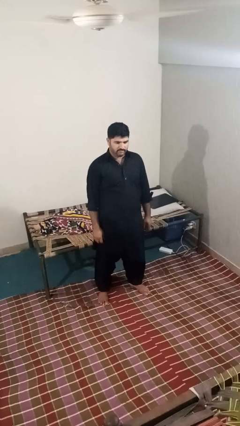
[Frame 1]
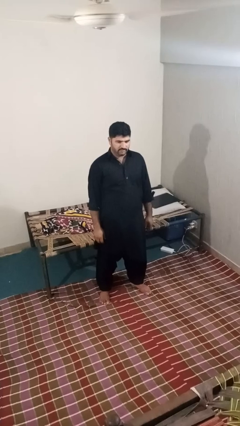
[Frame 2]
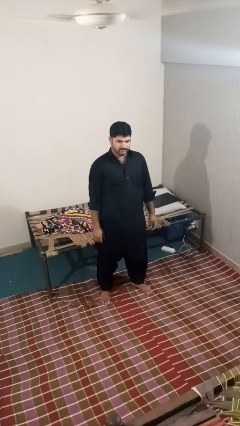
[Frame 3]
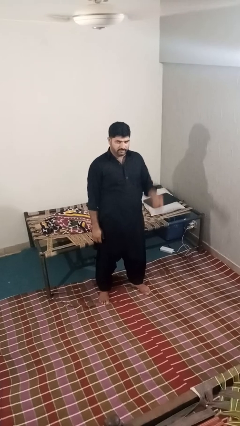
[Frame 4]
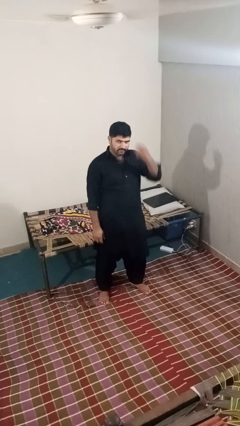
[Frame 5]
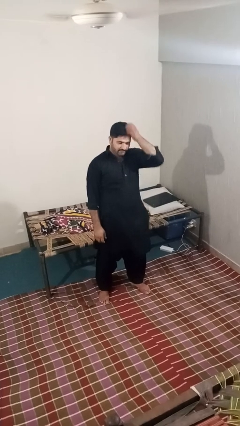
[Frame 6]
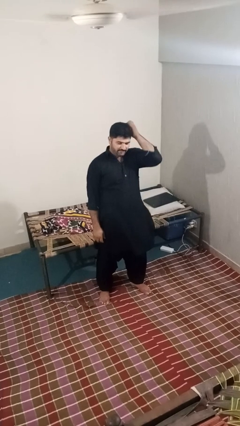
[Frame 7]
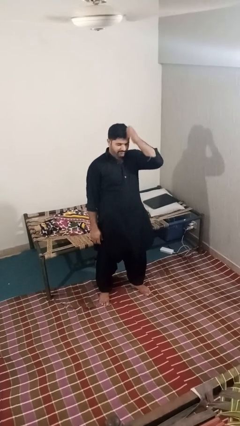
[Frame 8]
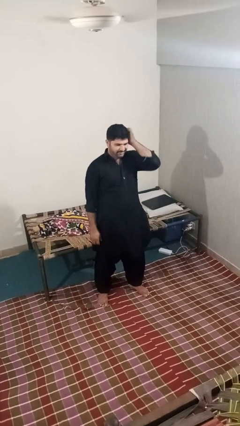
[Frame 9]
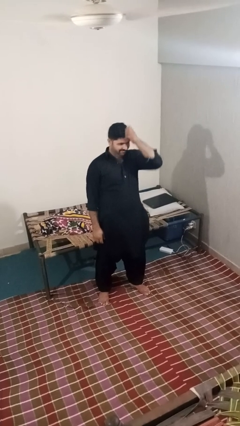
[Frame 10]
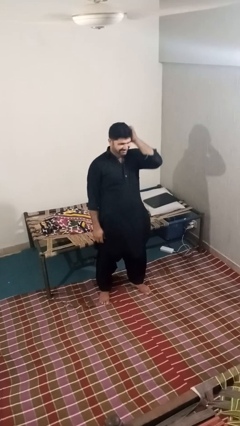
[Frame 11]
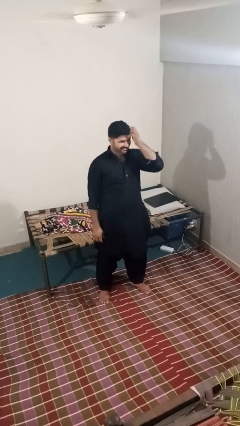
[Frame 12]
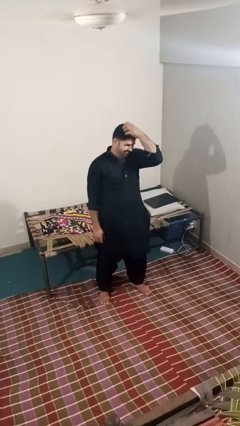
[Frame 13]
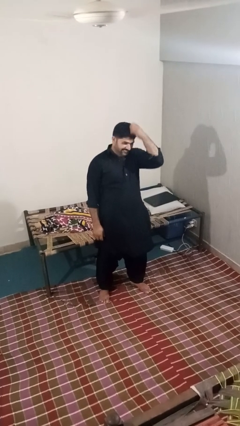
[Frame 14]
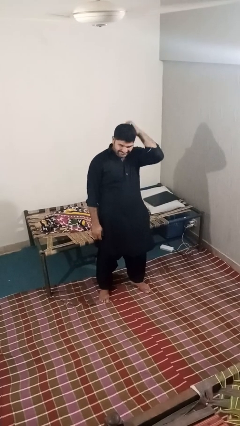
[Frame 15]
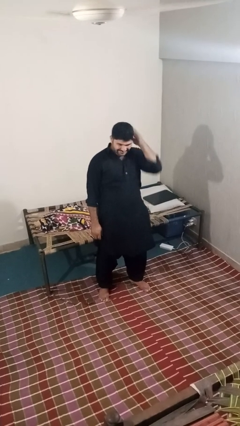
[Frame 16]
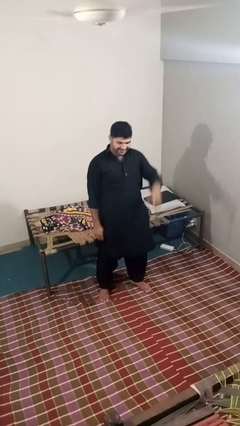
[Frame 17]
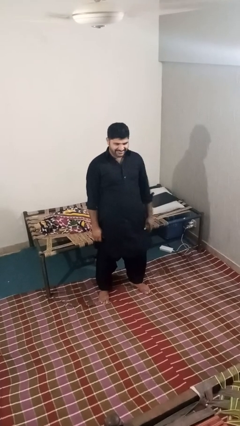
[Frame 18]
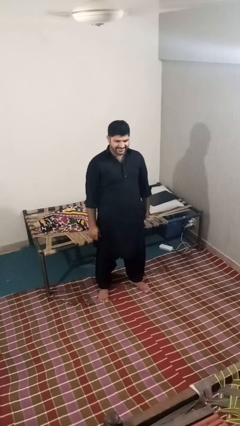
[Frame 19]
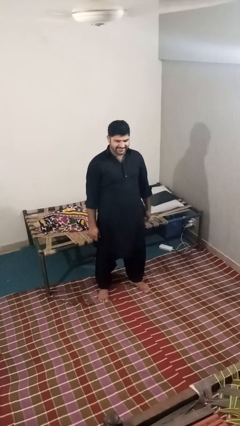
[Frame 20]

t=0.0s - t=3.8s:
person scratches face

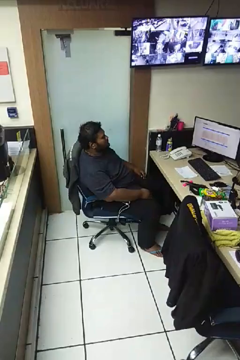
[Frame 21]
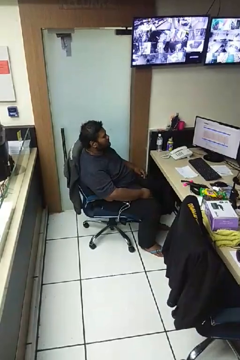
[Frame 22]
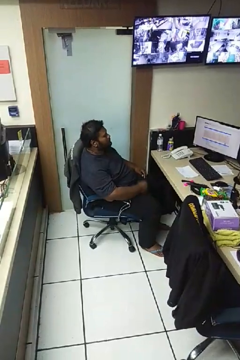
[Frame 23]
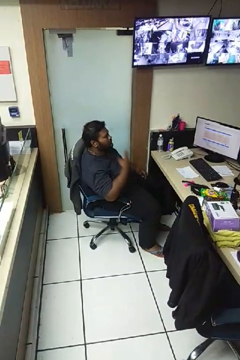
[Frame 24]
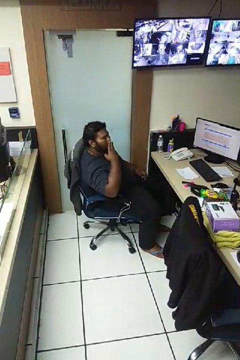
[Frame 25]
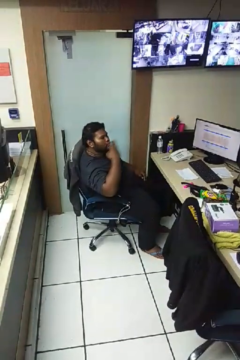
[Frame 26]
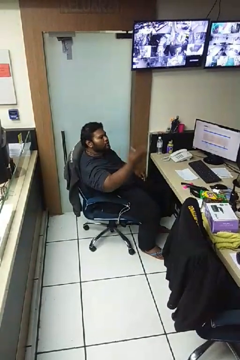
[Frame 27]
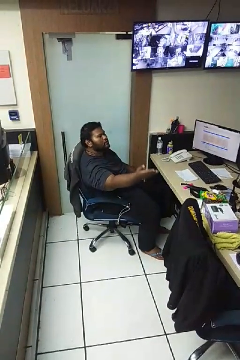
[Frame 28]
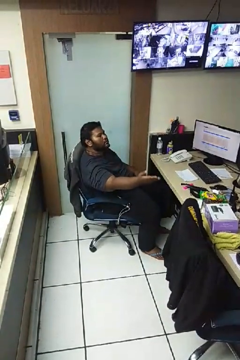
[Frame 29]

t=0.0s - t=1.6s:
person gestures blow kiss

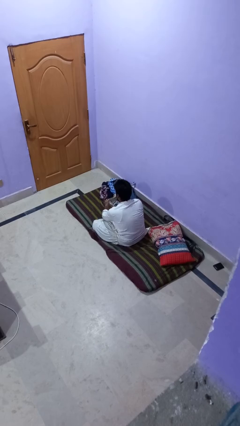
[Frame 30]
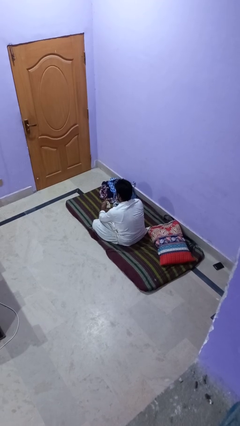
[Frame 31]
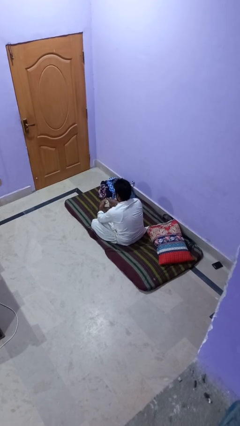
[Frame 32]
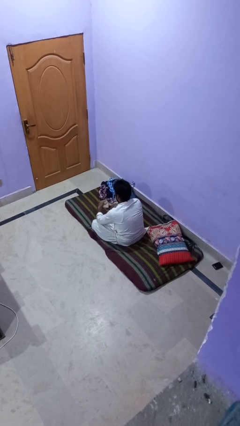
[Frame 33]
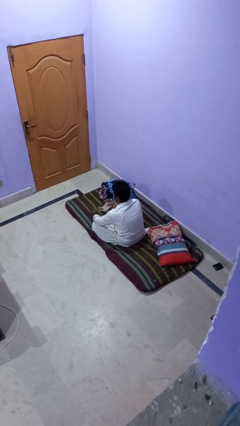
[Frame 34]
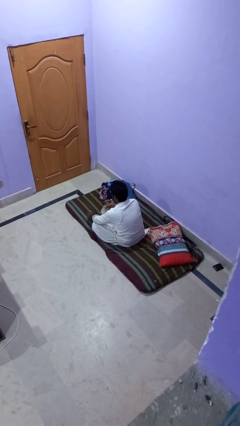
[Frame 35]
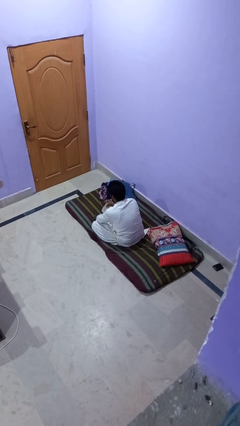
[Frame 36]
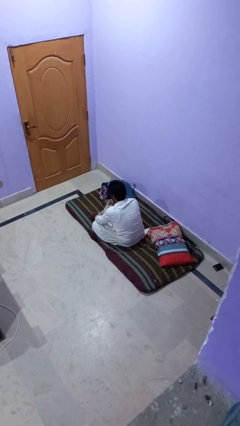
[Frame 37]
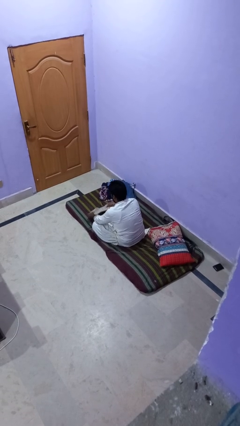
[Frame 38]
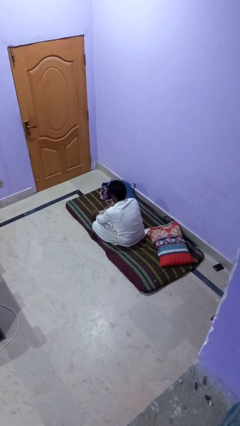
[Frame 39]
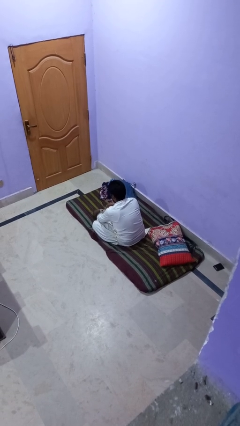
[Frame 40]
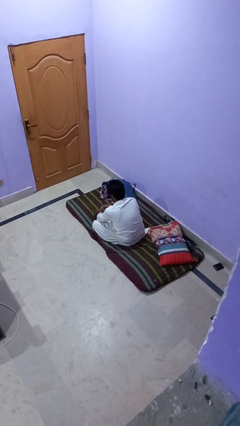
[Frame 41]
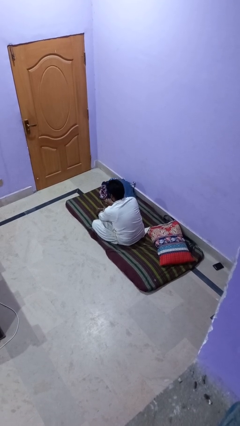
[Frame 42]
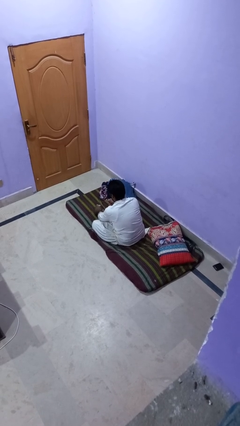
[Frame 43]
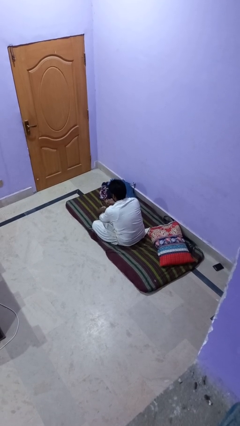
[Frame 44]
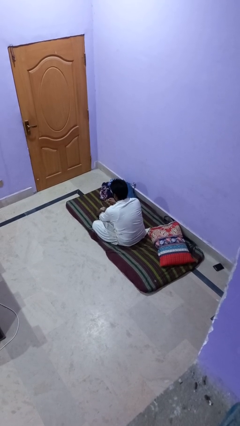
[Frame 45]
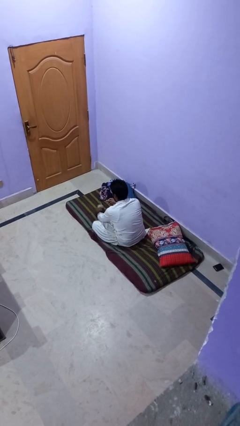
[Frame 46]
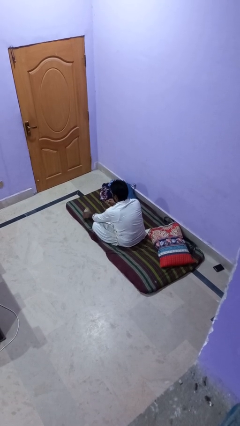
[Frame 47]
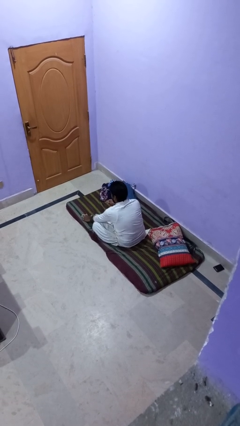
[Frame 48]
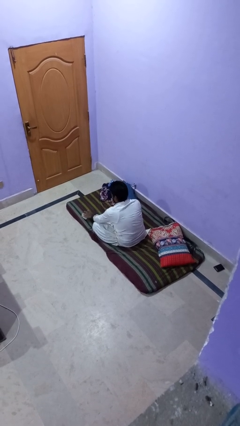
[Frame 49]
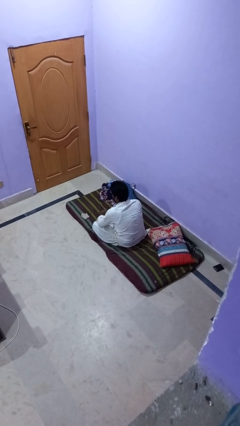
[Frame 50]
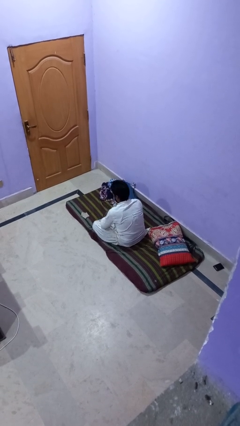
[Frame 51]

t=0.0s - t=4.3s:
person folds socks

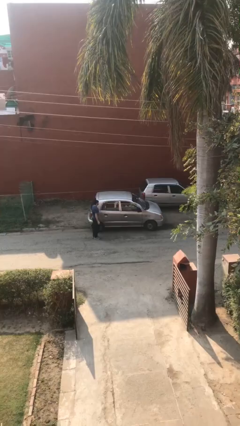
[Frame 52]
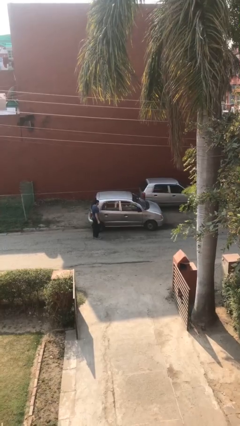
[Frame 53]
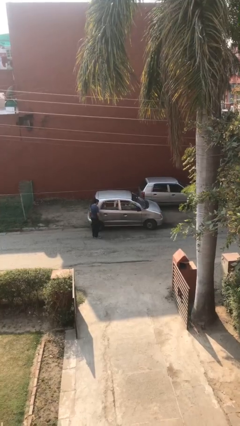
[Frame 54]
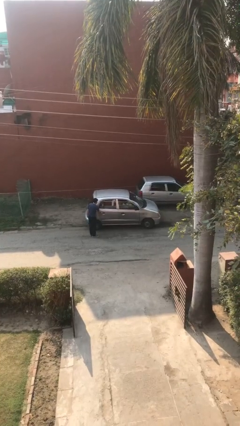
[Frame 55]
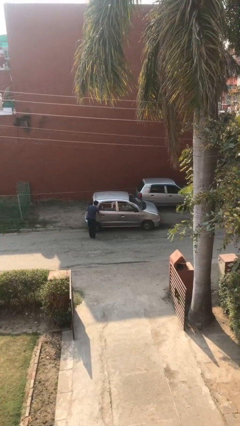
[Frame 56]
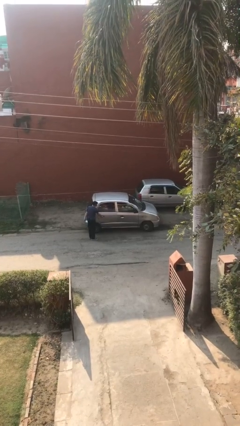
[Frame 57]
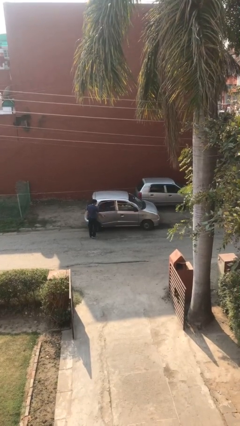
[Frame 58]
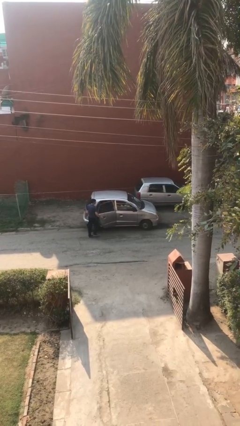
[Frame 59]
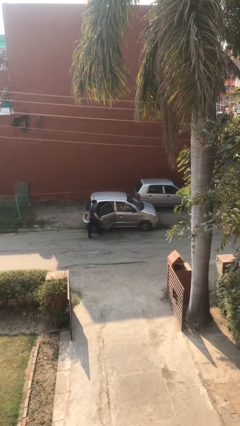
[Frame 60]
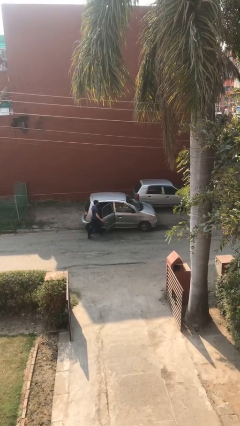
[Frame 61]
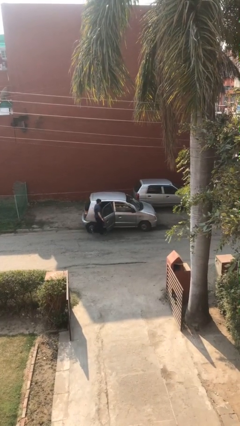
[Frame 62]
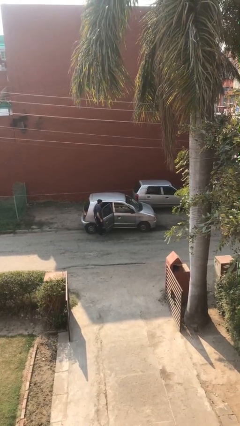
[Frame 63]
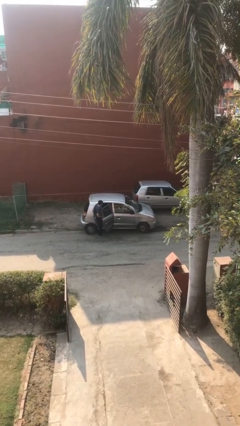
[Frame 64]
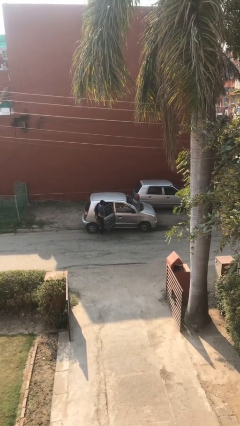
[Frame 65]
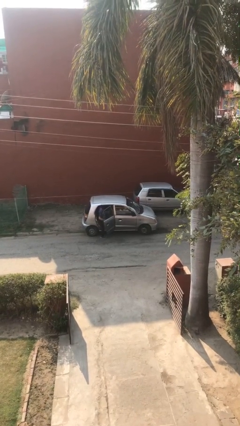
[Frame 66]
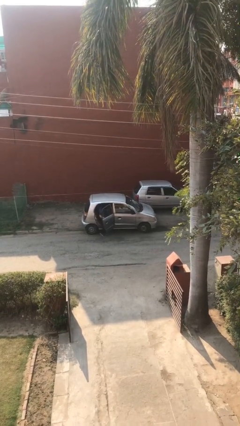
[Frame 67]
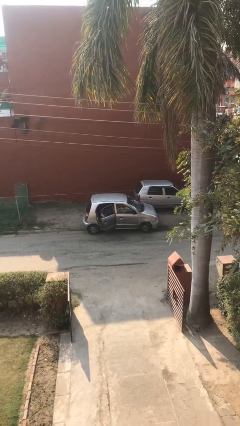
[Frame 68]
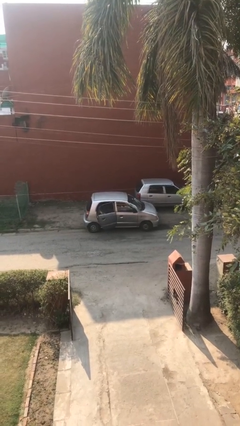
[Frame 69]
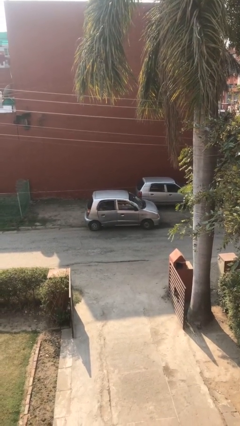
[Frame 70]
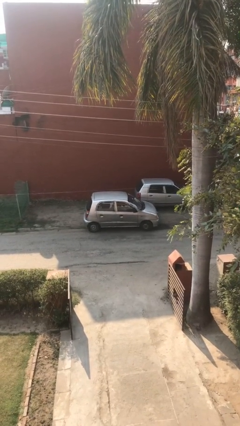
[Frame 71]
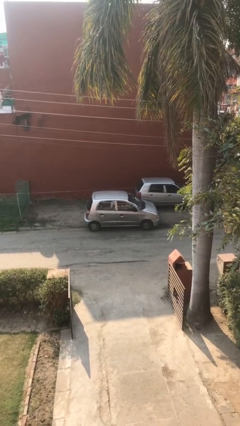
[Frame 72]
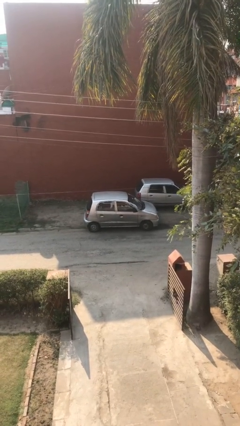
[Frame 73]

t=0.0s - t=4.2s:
car picks up person

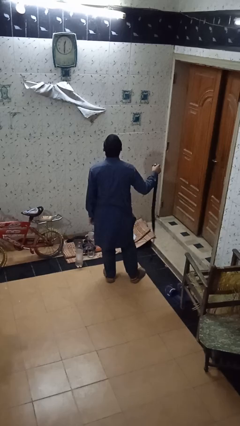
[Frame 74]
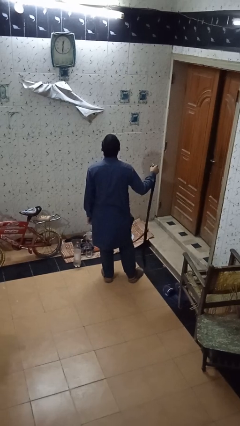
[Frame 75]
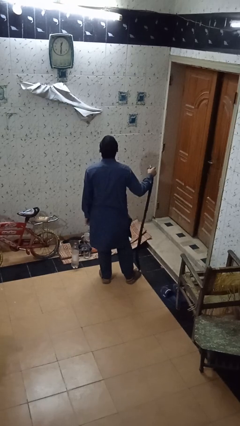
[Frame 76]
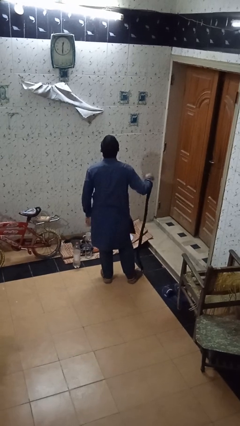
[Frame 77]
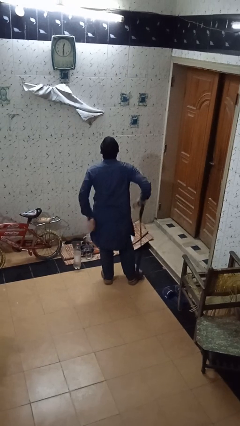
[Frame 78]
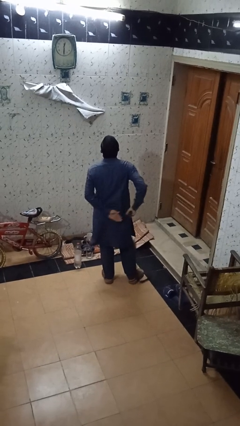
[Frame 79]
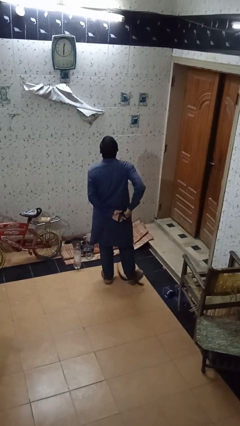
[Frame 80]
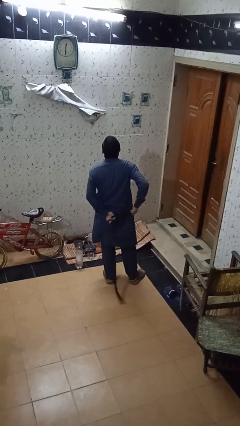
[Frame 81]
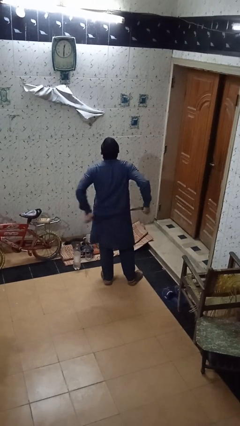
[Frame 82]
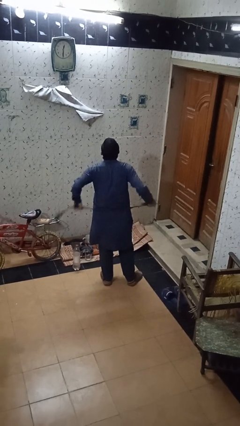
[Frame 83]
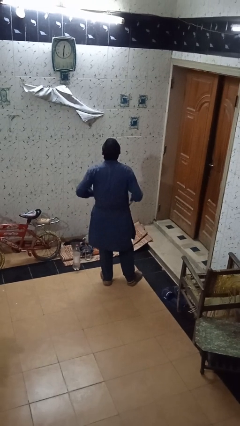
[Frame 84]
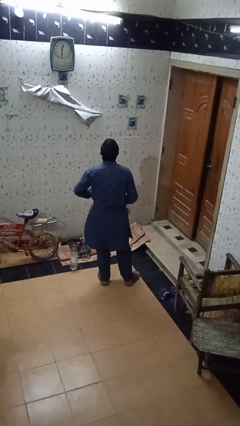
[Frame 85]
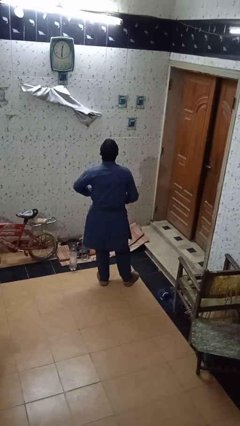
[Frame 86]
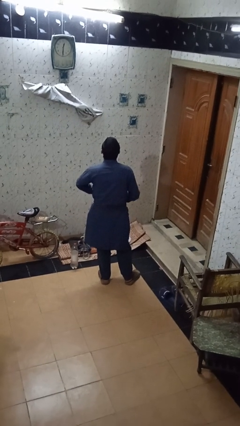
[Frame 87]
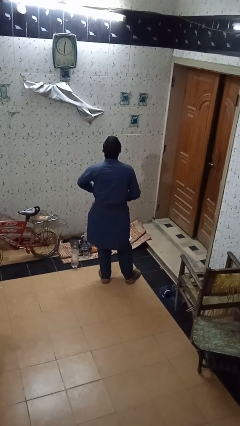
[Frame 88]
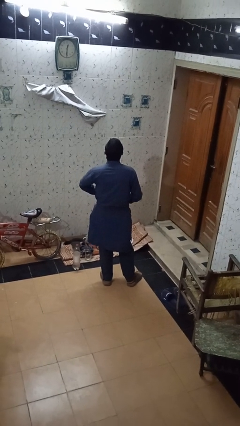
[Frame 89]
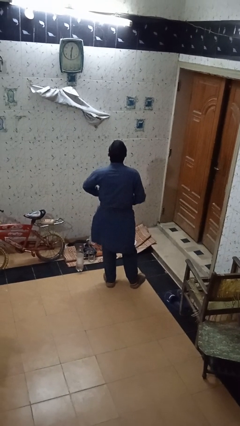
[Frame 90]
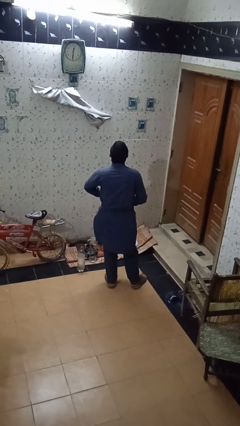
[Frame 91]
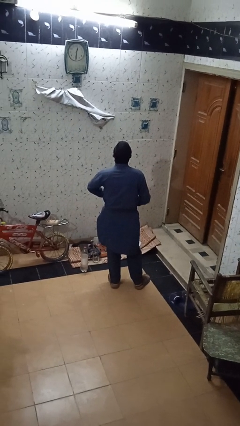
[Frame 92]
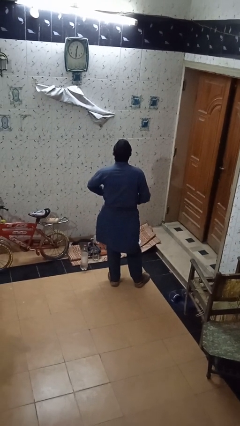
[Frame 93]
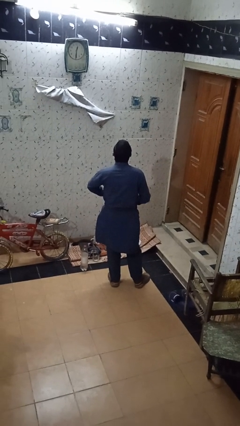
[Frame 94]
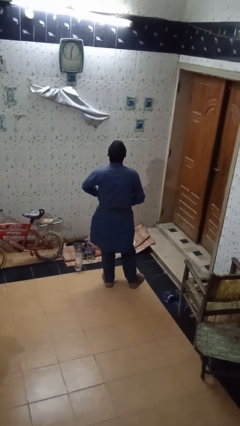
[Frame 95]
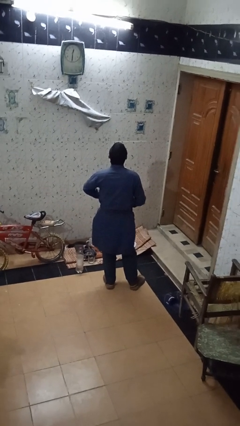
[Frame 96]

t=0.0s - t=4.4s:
person puts on belt

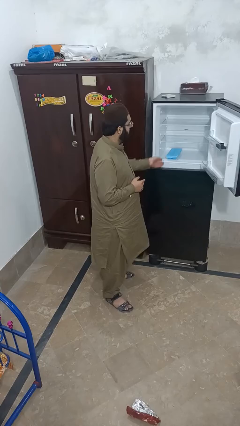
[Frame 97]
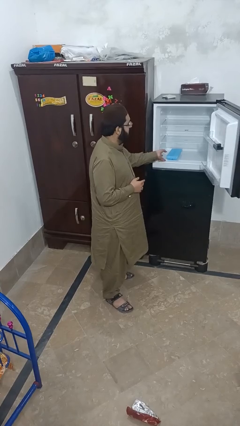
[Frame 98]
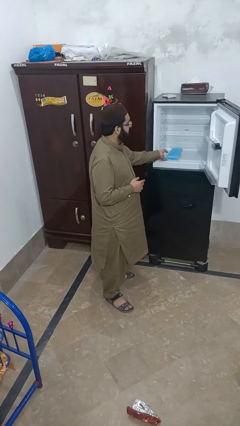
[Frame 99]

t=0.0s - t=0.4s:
person takes object from refrigerator
